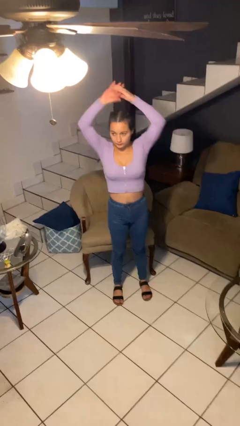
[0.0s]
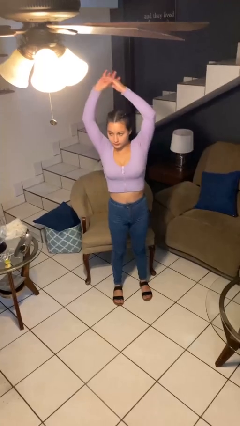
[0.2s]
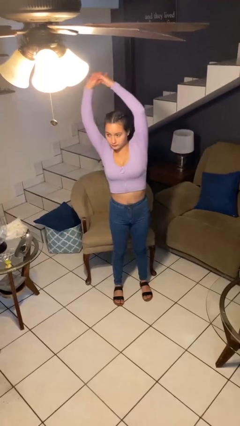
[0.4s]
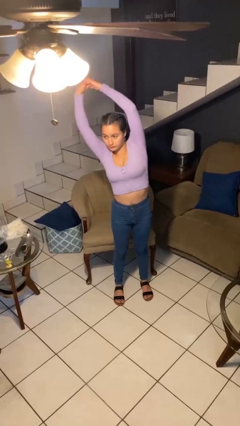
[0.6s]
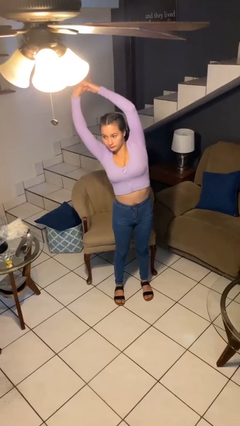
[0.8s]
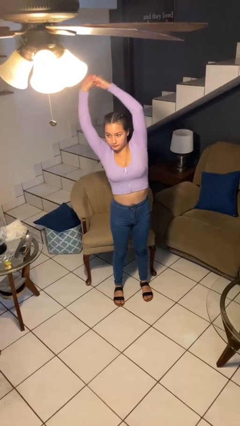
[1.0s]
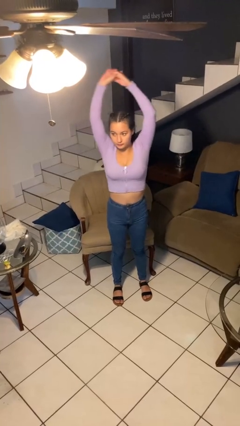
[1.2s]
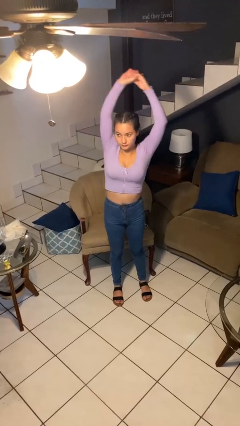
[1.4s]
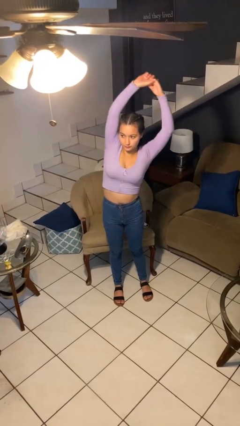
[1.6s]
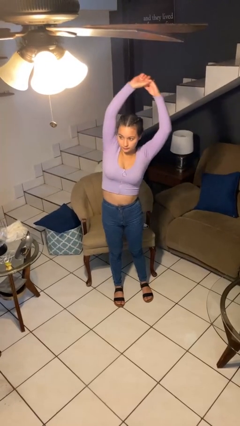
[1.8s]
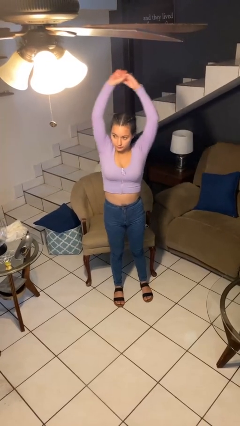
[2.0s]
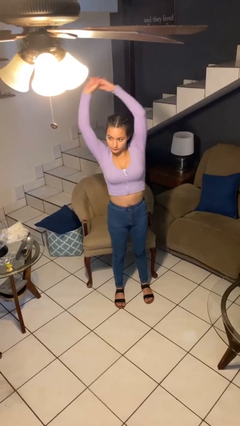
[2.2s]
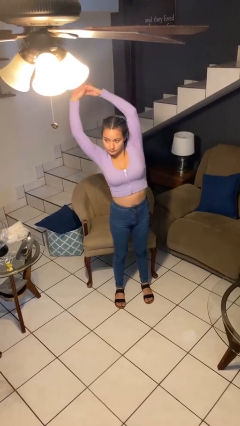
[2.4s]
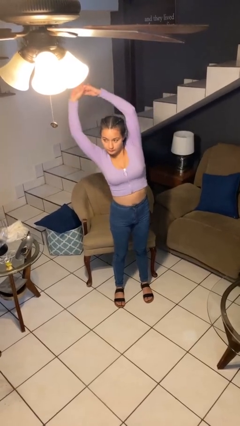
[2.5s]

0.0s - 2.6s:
person stretches arms over head

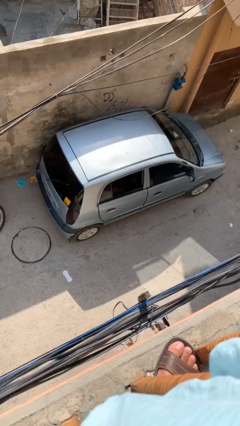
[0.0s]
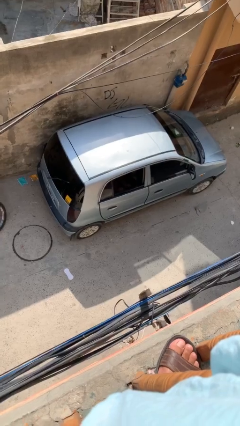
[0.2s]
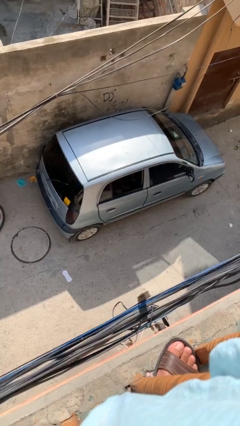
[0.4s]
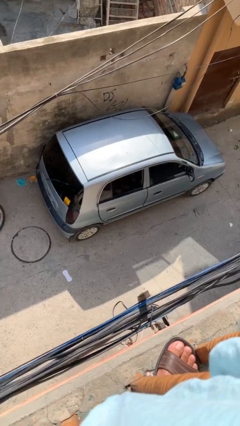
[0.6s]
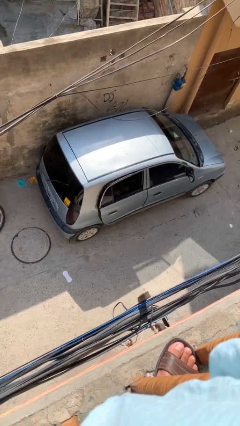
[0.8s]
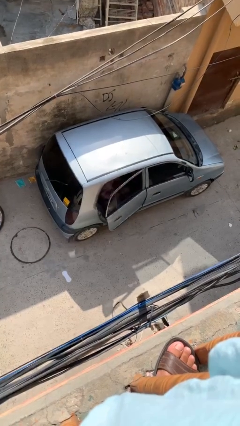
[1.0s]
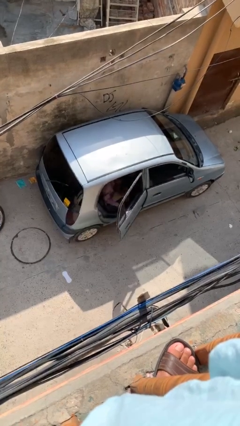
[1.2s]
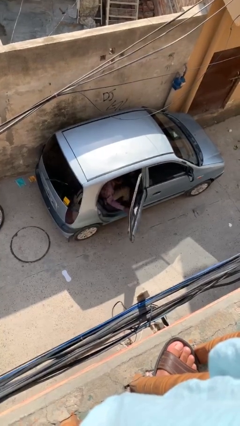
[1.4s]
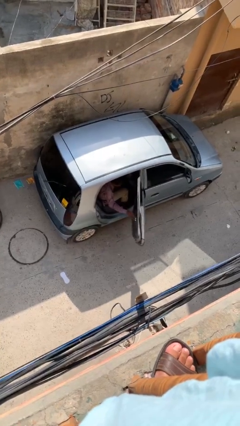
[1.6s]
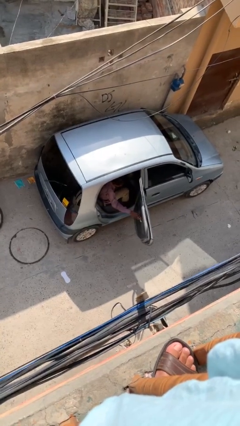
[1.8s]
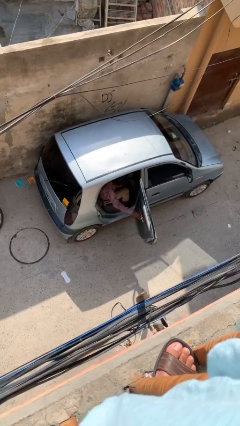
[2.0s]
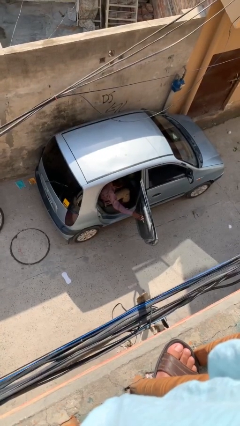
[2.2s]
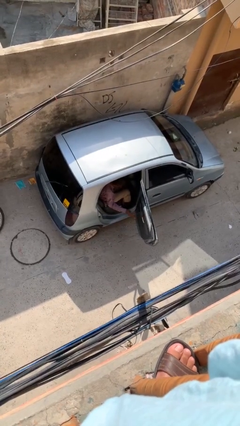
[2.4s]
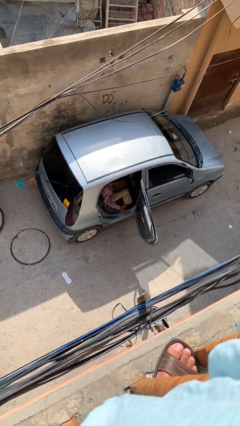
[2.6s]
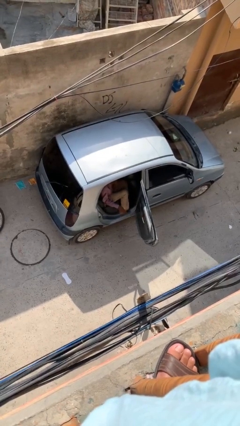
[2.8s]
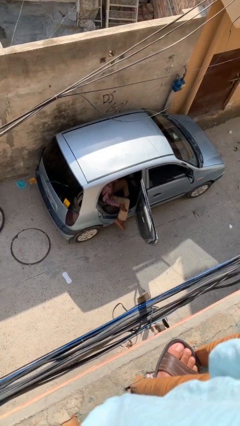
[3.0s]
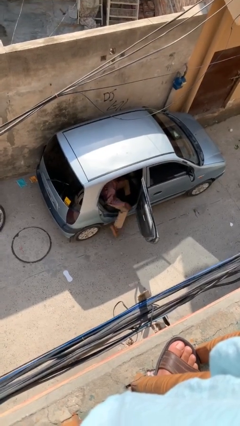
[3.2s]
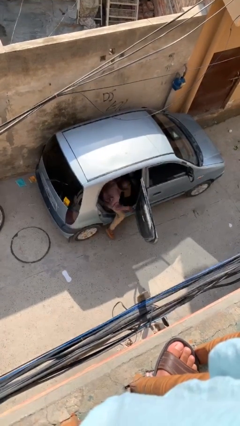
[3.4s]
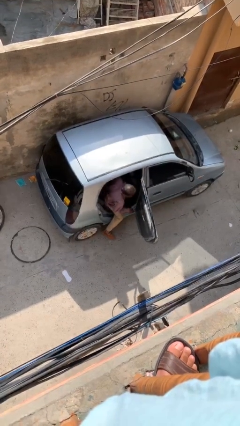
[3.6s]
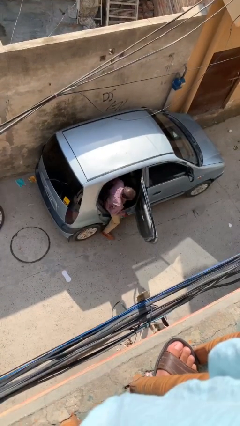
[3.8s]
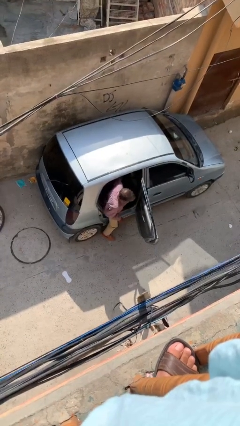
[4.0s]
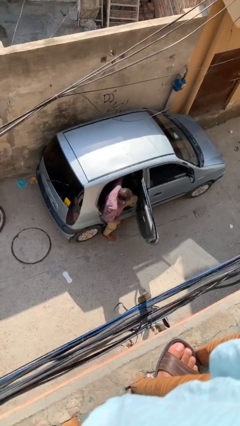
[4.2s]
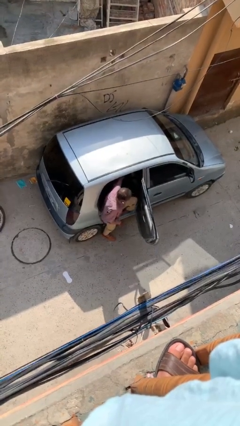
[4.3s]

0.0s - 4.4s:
person opens car door

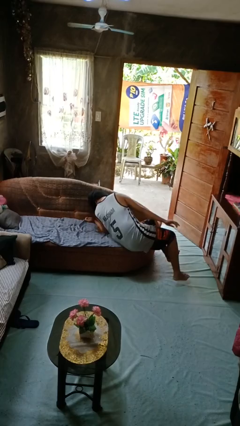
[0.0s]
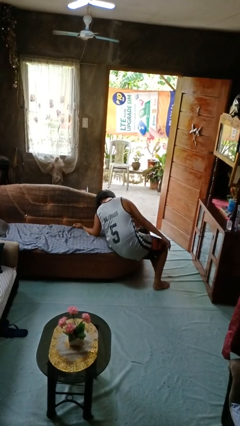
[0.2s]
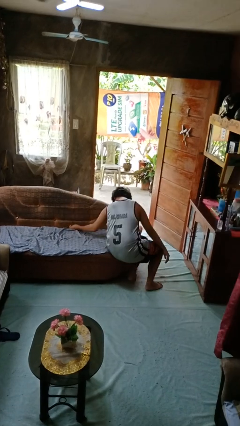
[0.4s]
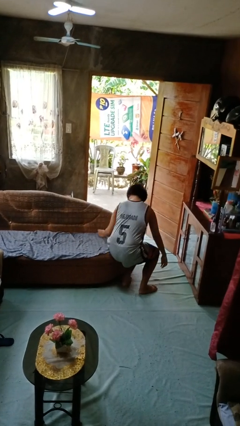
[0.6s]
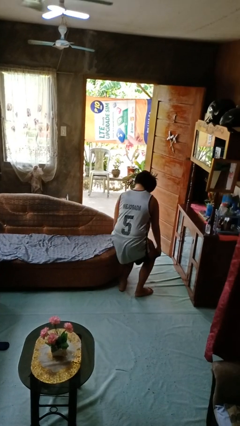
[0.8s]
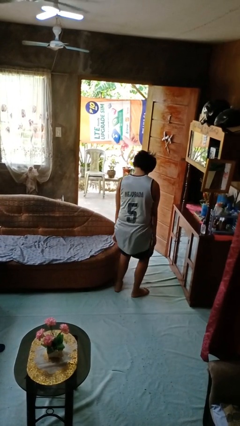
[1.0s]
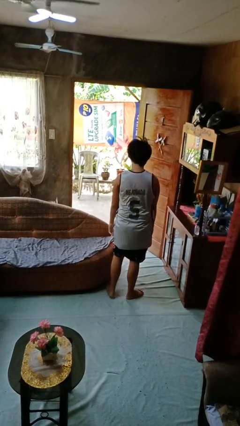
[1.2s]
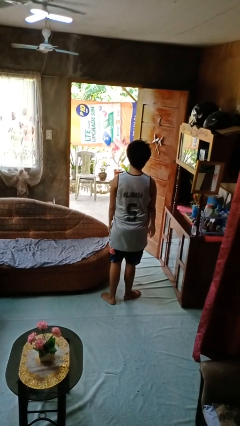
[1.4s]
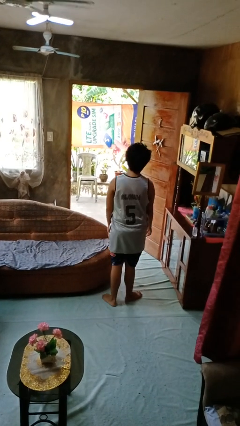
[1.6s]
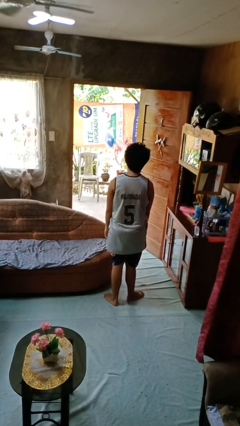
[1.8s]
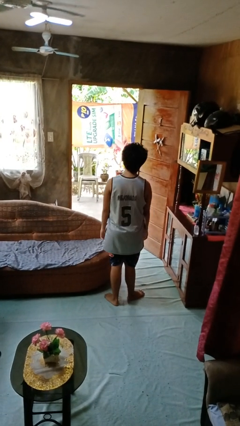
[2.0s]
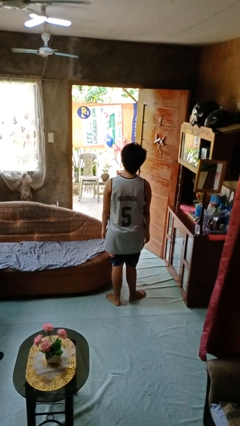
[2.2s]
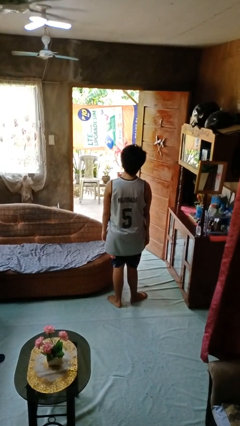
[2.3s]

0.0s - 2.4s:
person stands up

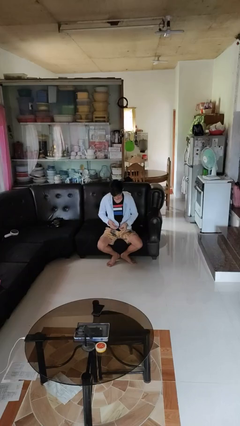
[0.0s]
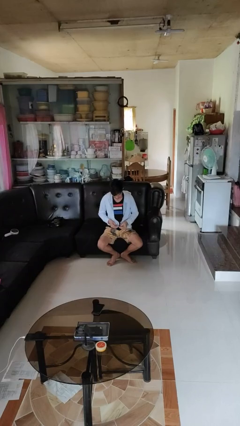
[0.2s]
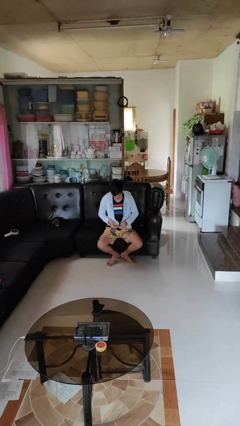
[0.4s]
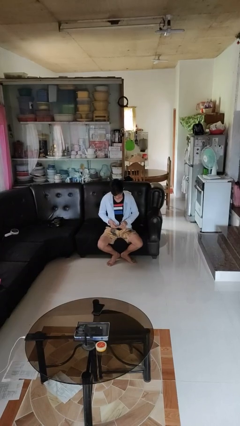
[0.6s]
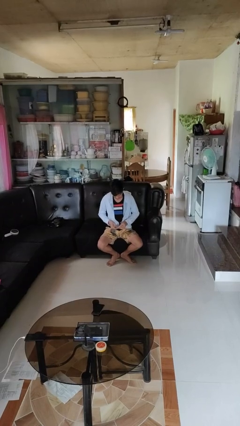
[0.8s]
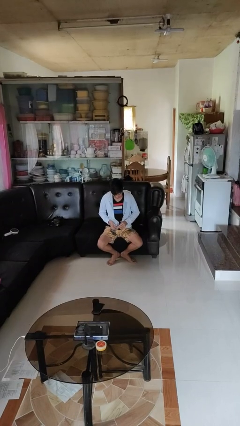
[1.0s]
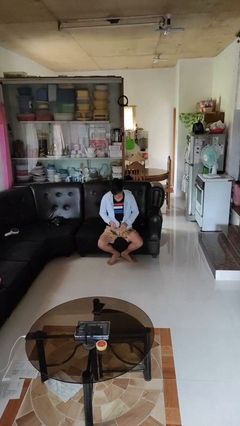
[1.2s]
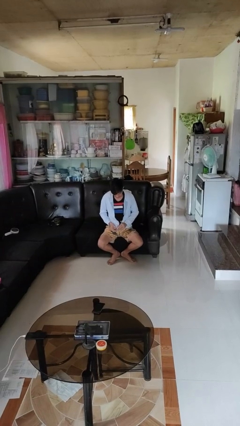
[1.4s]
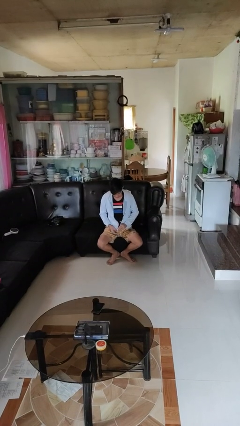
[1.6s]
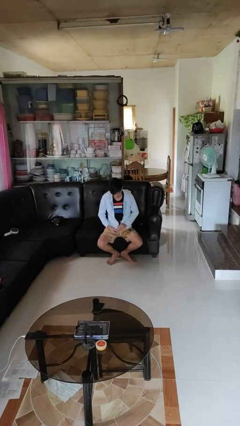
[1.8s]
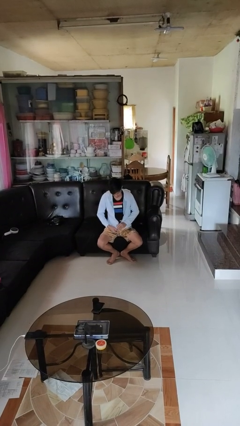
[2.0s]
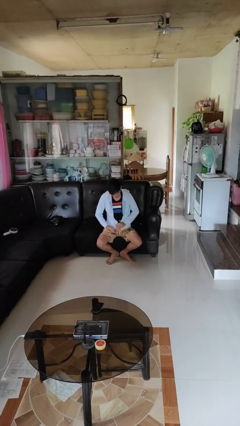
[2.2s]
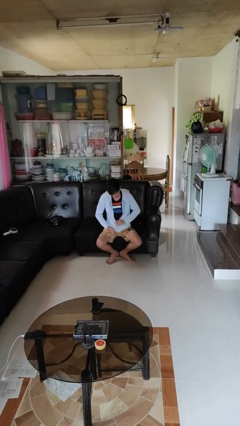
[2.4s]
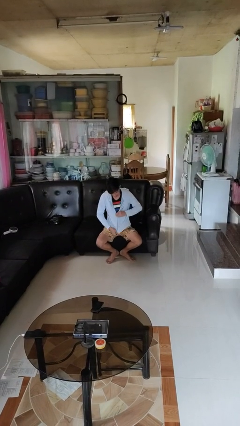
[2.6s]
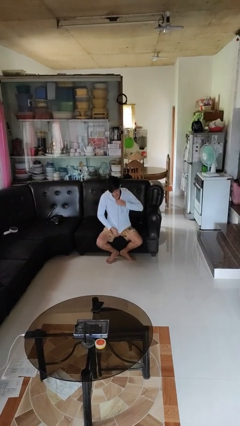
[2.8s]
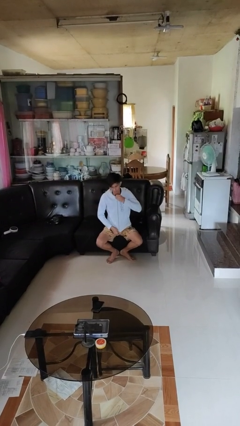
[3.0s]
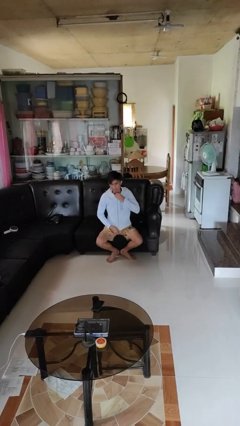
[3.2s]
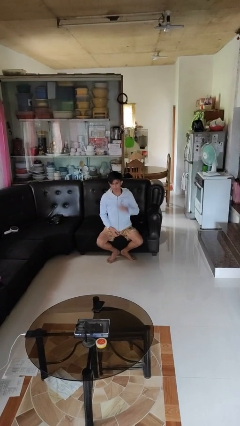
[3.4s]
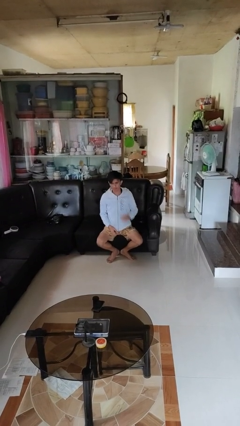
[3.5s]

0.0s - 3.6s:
person zips up jacket

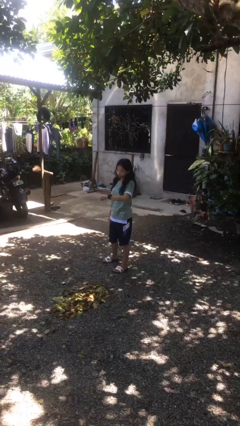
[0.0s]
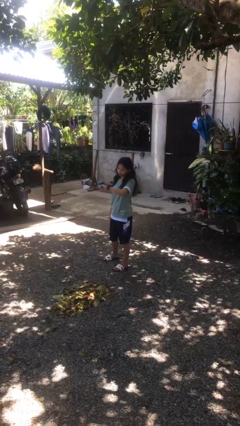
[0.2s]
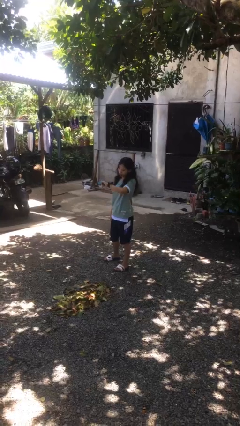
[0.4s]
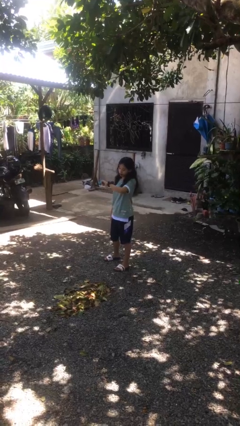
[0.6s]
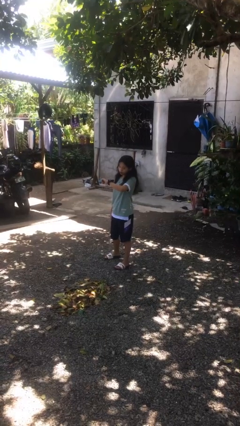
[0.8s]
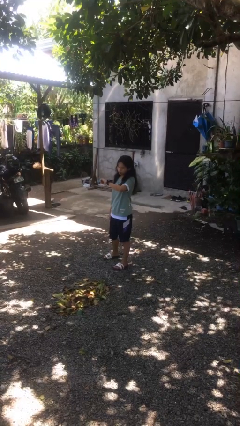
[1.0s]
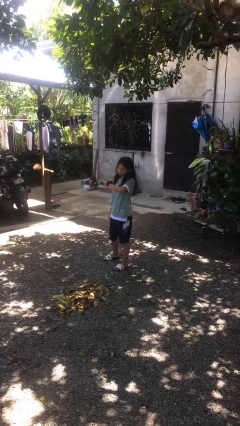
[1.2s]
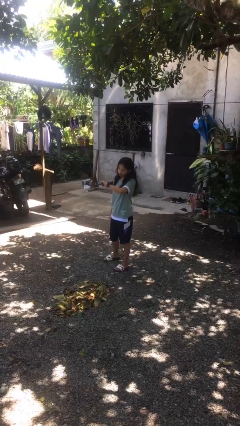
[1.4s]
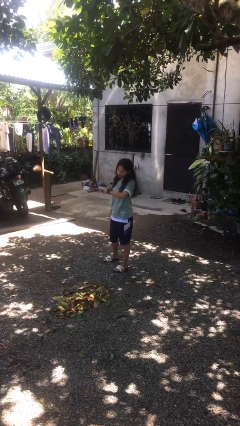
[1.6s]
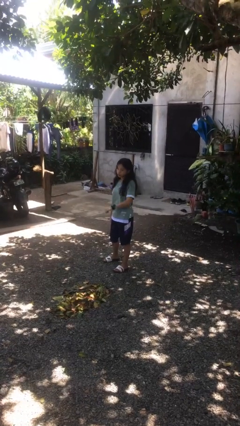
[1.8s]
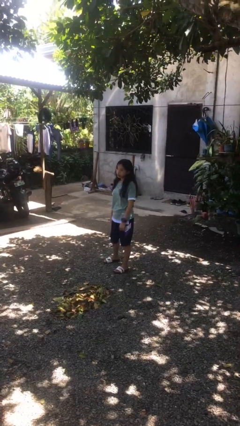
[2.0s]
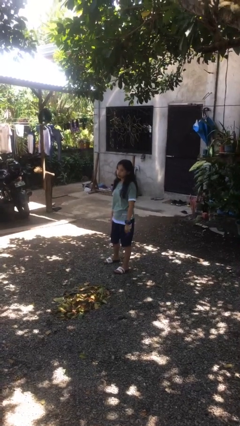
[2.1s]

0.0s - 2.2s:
person looks at wristwatch

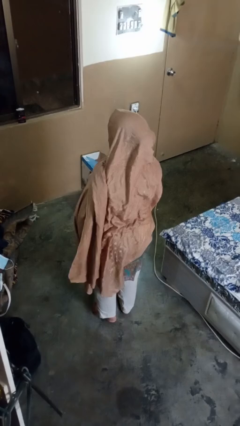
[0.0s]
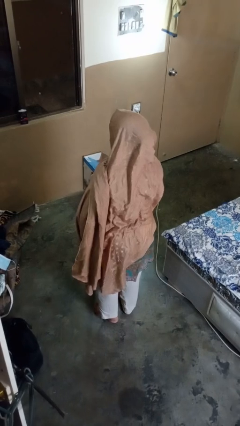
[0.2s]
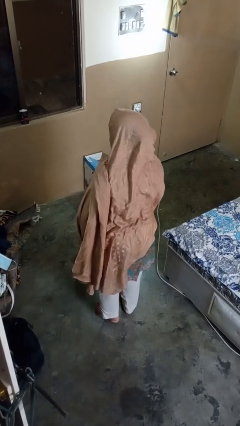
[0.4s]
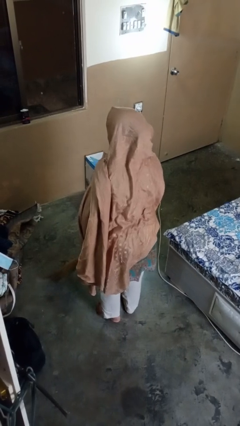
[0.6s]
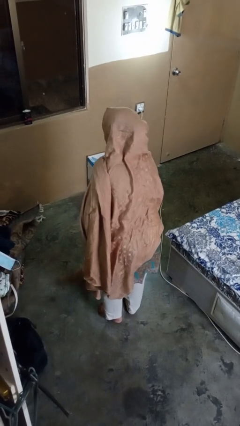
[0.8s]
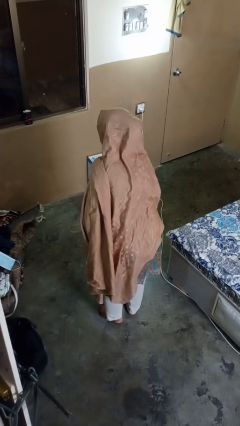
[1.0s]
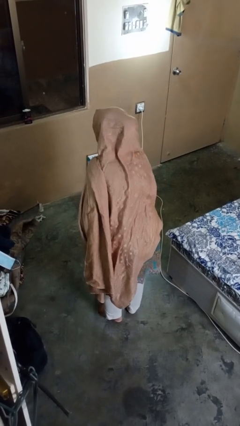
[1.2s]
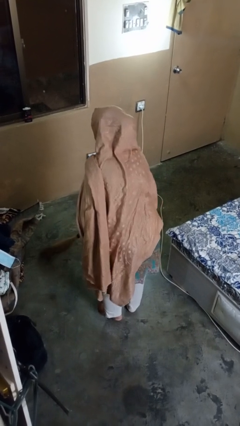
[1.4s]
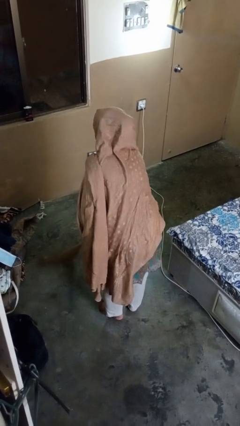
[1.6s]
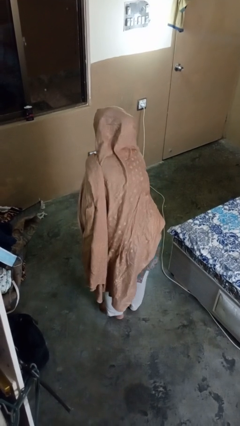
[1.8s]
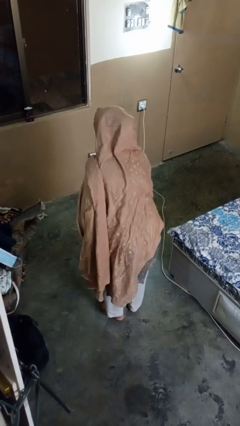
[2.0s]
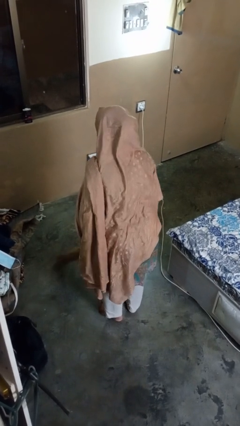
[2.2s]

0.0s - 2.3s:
person sweeps floor

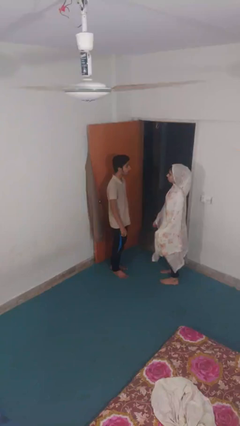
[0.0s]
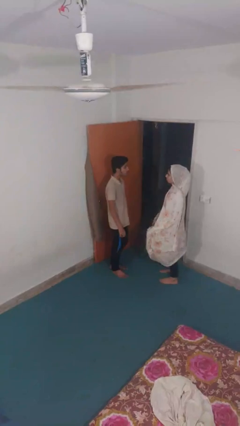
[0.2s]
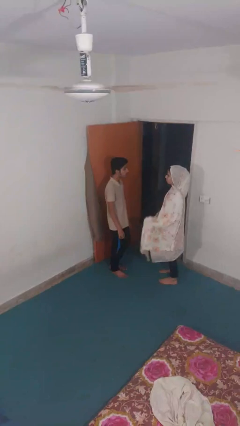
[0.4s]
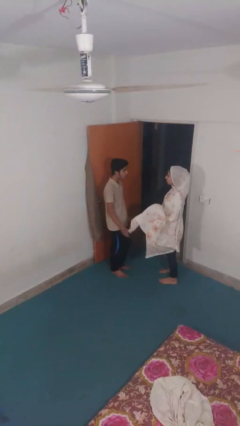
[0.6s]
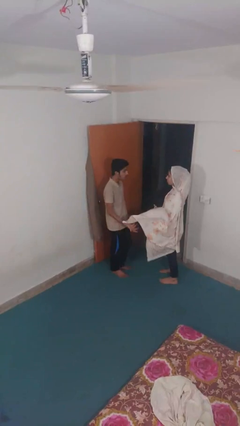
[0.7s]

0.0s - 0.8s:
person grabs person by forearm
